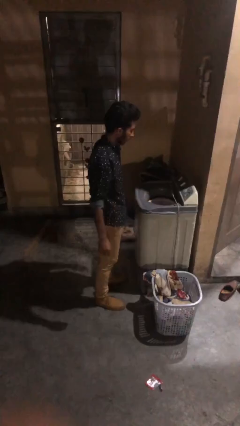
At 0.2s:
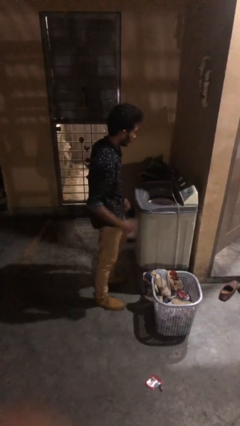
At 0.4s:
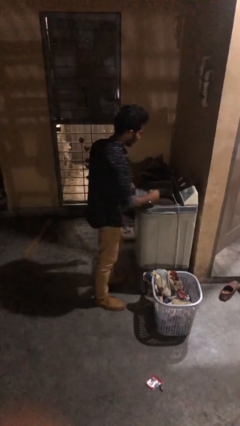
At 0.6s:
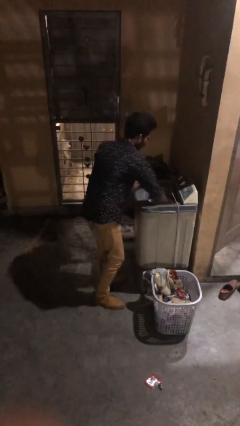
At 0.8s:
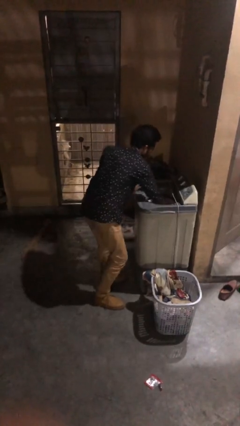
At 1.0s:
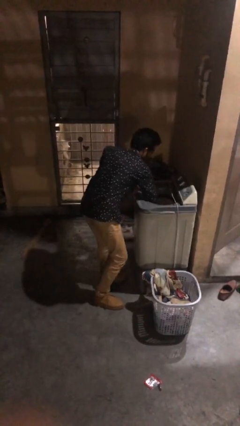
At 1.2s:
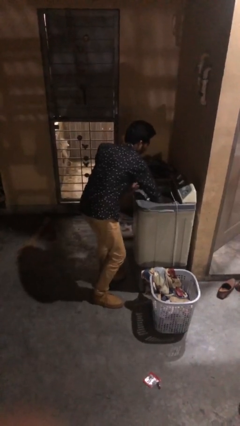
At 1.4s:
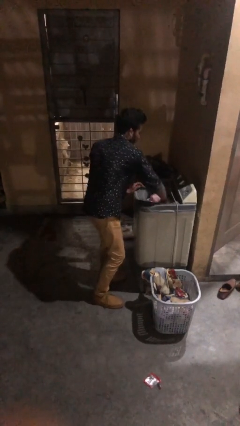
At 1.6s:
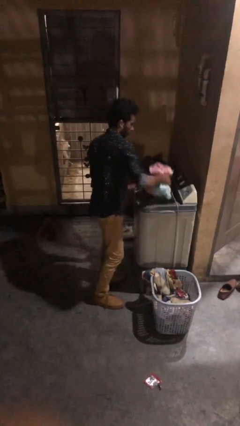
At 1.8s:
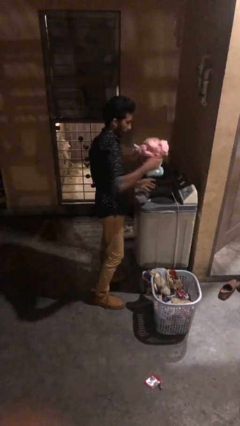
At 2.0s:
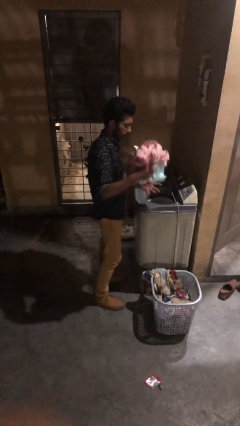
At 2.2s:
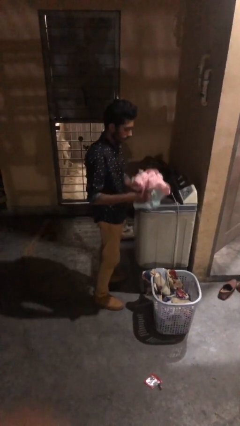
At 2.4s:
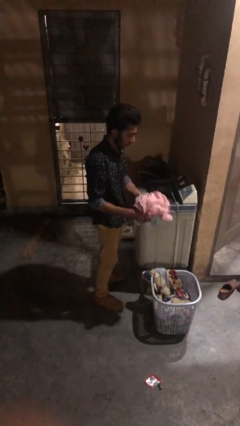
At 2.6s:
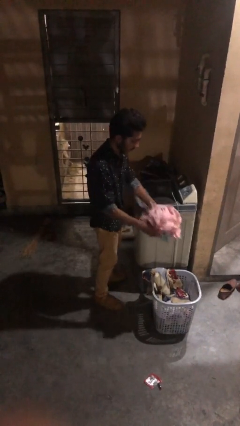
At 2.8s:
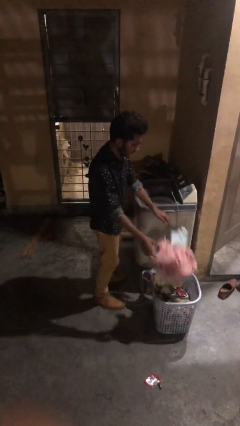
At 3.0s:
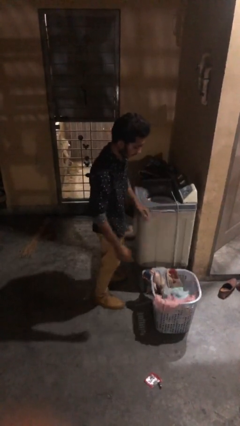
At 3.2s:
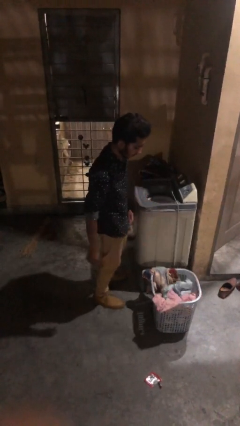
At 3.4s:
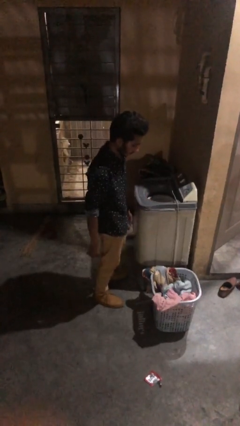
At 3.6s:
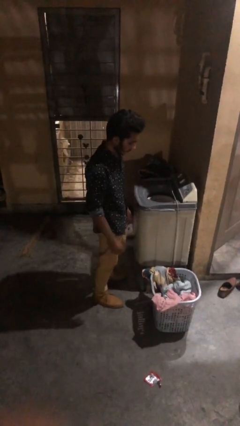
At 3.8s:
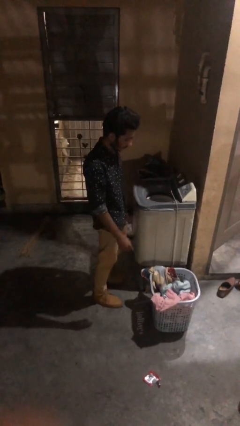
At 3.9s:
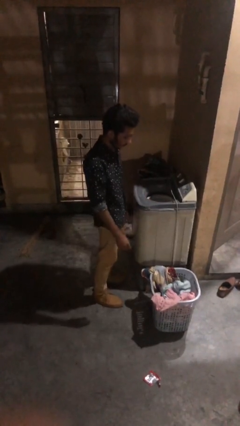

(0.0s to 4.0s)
person unloads clotheswasher

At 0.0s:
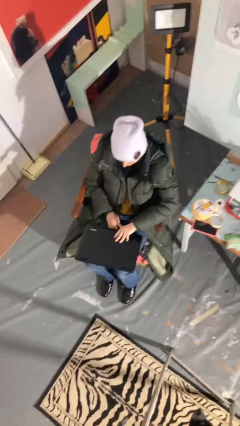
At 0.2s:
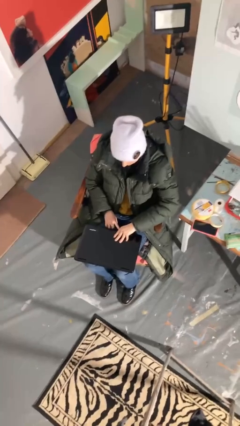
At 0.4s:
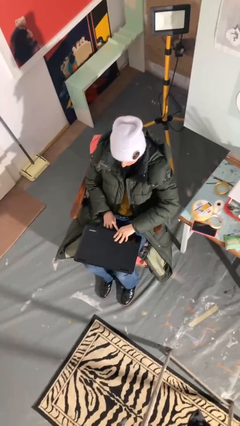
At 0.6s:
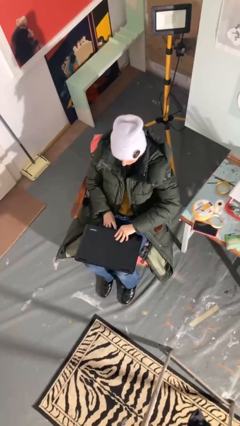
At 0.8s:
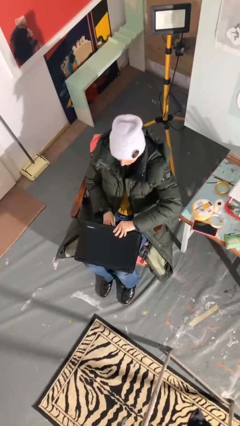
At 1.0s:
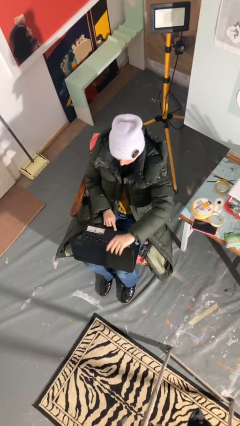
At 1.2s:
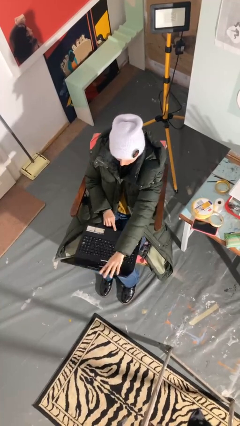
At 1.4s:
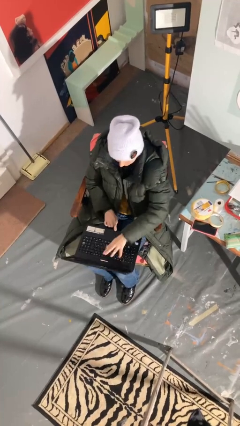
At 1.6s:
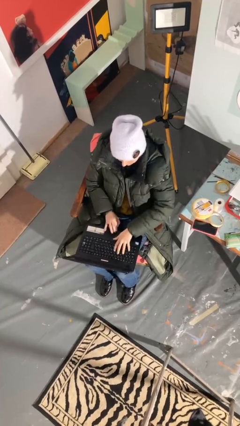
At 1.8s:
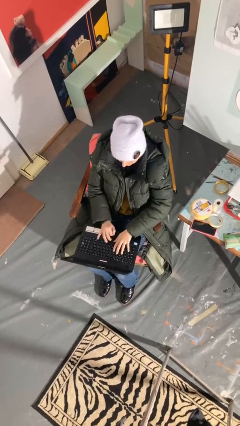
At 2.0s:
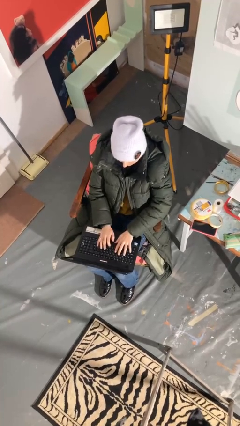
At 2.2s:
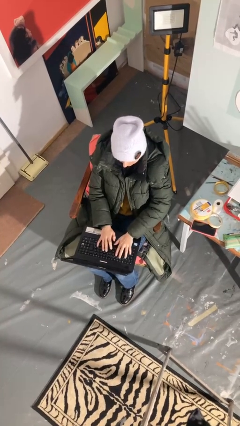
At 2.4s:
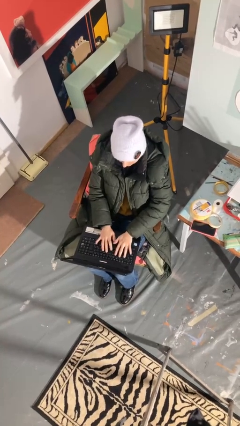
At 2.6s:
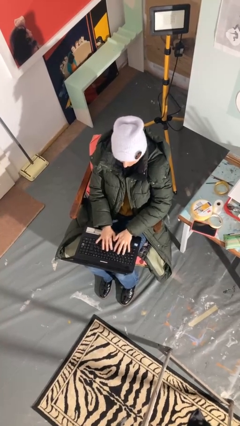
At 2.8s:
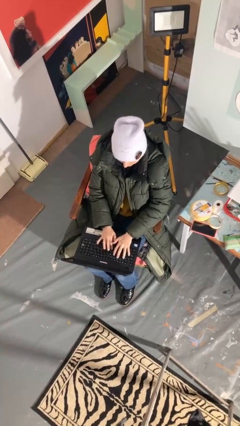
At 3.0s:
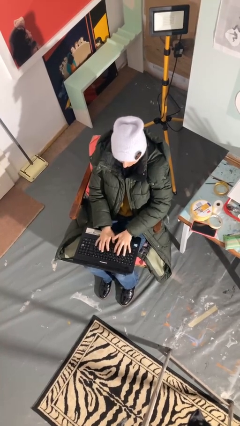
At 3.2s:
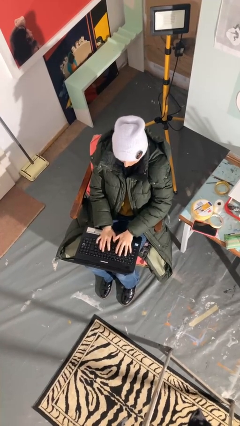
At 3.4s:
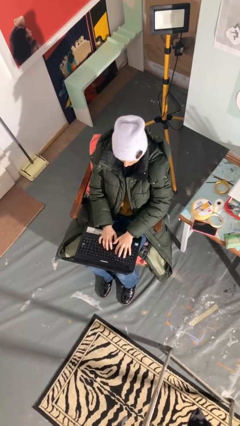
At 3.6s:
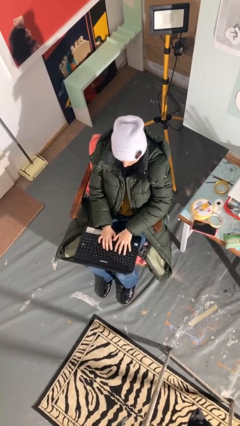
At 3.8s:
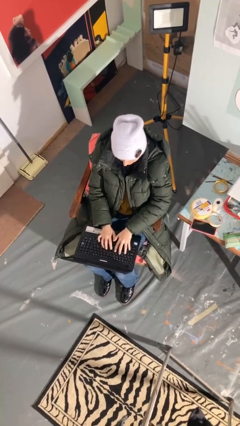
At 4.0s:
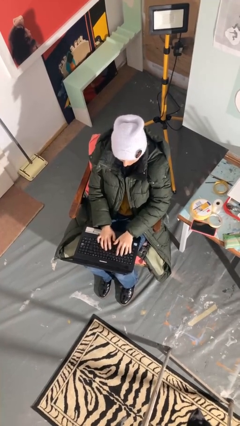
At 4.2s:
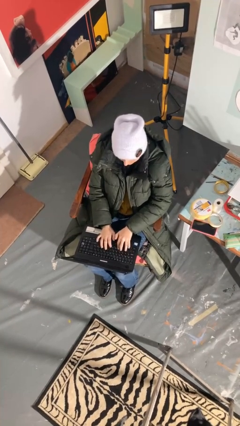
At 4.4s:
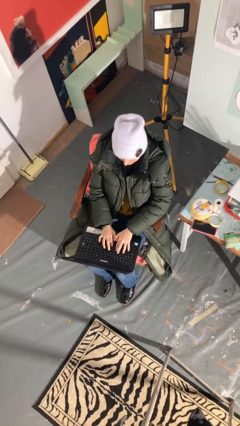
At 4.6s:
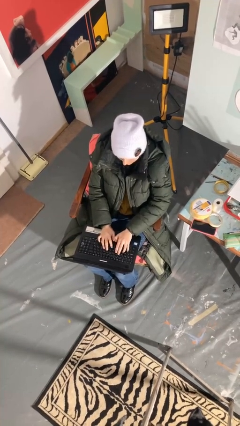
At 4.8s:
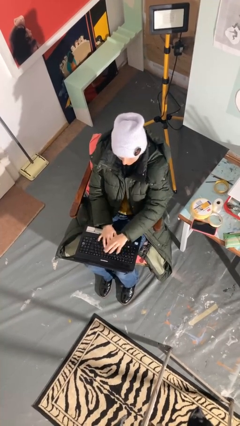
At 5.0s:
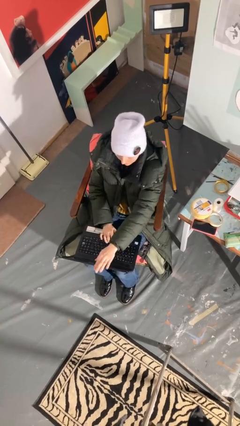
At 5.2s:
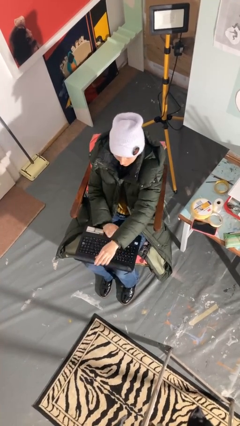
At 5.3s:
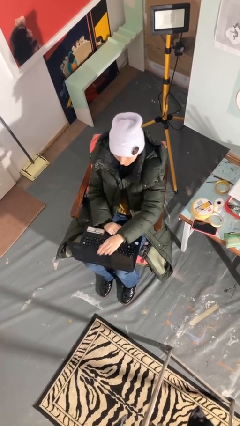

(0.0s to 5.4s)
person interacts with laptop

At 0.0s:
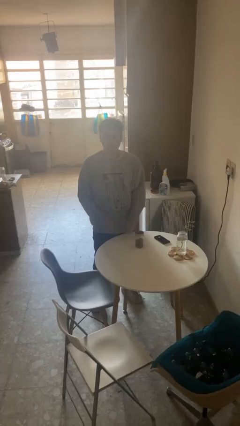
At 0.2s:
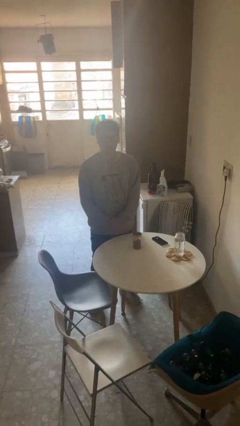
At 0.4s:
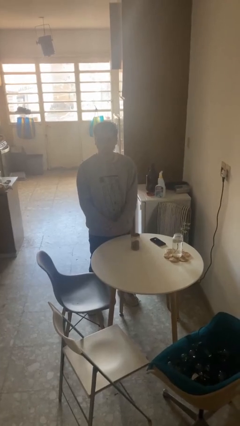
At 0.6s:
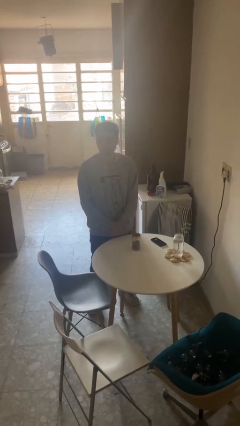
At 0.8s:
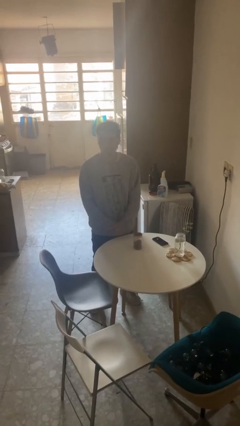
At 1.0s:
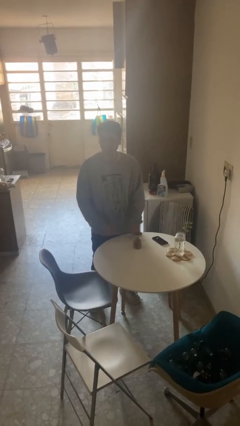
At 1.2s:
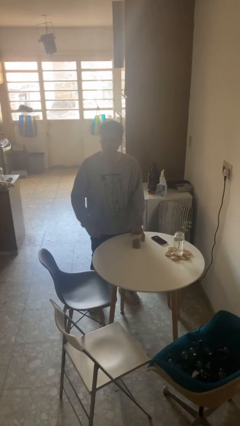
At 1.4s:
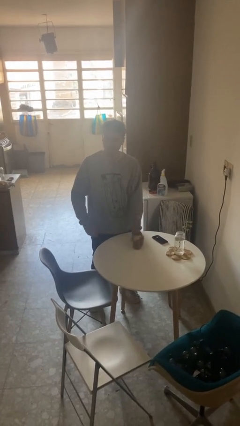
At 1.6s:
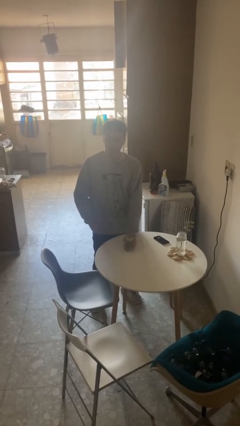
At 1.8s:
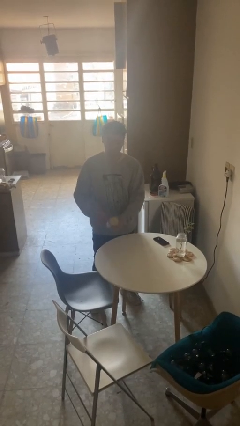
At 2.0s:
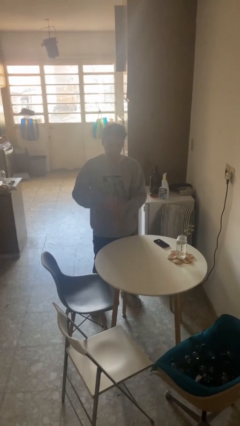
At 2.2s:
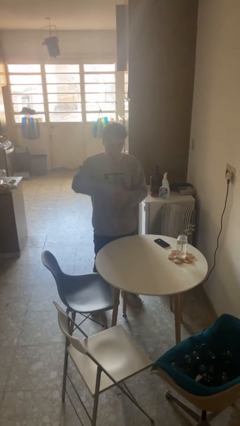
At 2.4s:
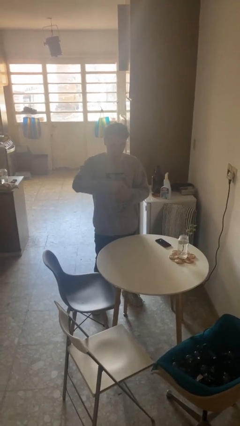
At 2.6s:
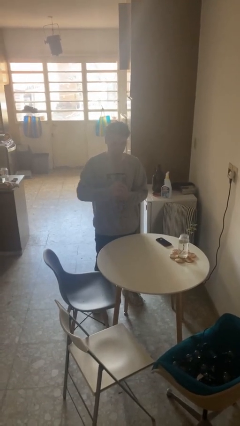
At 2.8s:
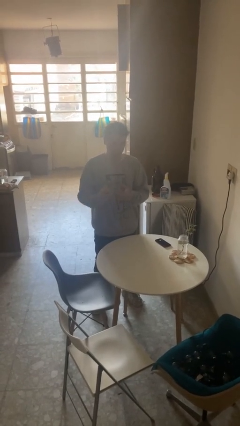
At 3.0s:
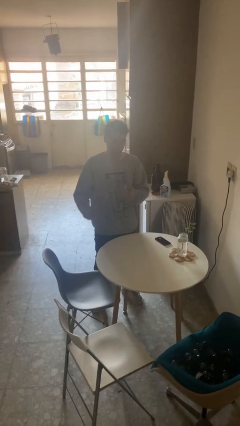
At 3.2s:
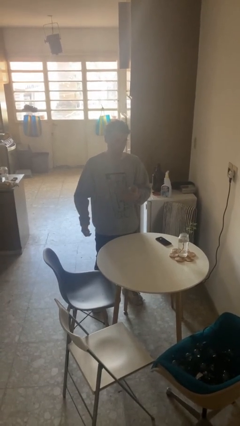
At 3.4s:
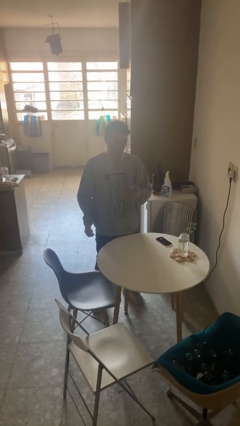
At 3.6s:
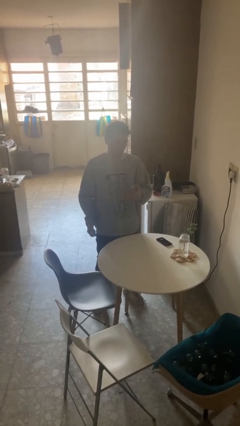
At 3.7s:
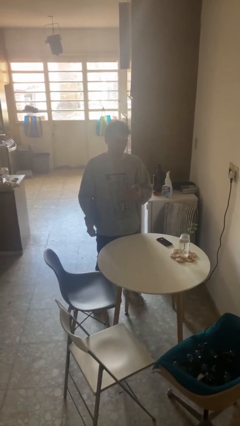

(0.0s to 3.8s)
person opens jar

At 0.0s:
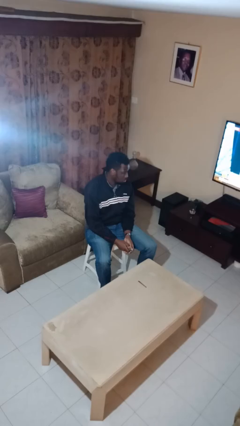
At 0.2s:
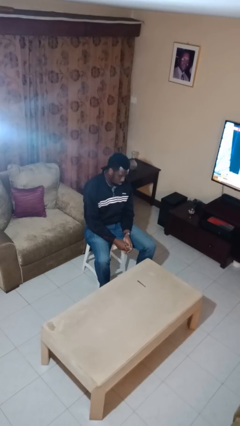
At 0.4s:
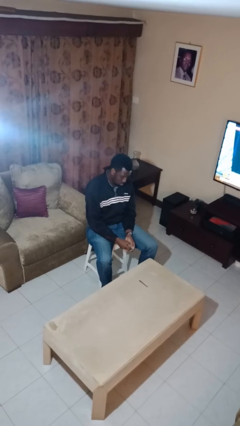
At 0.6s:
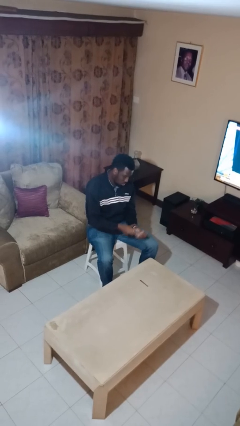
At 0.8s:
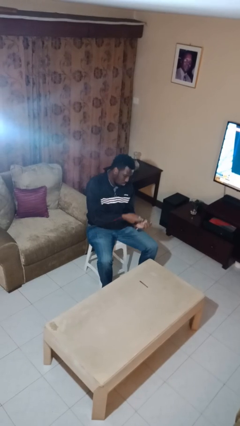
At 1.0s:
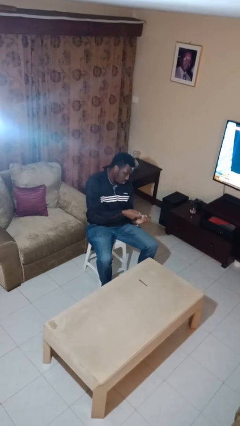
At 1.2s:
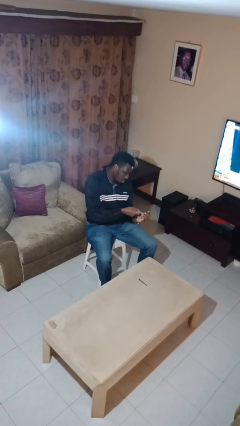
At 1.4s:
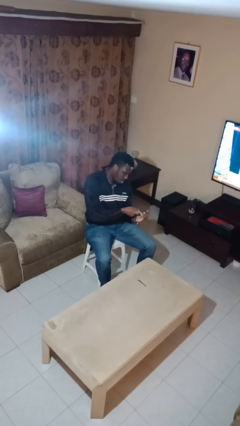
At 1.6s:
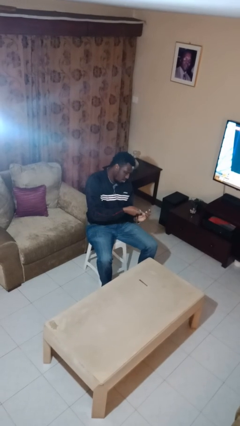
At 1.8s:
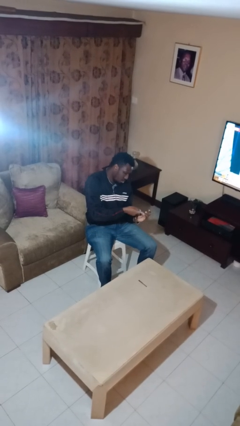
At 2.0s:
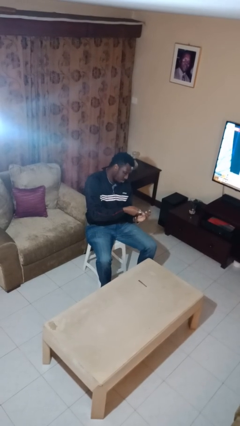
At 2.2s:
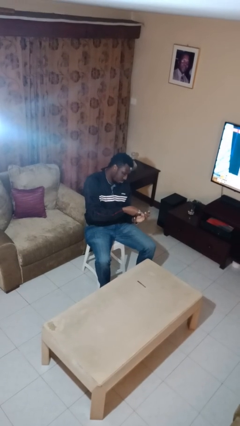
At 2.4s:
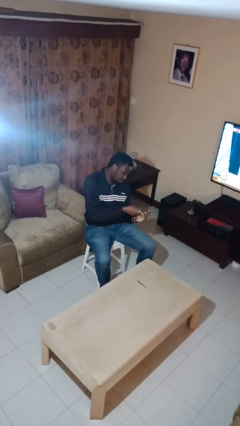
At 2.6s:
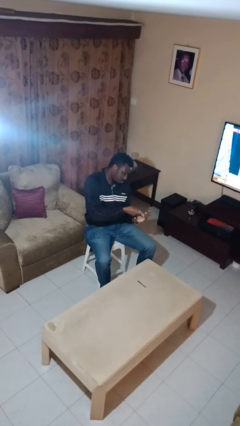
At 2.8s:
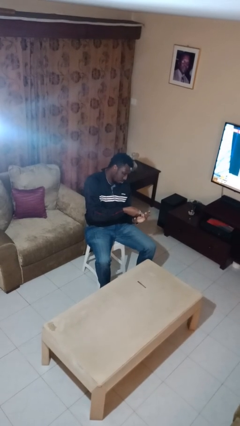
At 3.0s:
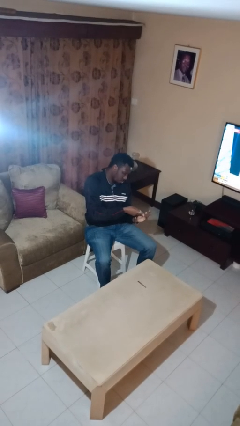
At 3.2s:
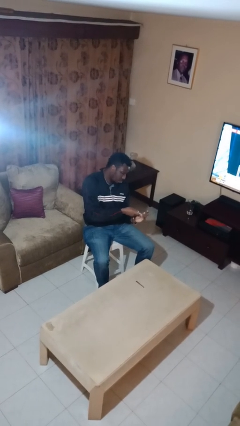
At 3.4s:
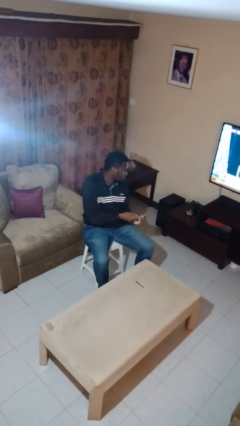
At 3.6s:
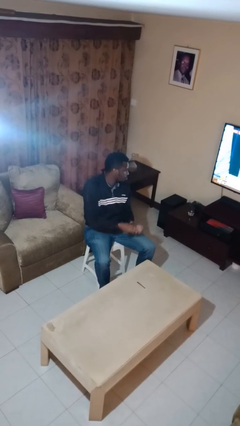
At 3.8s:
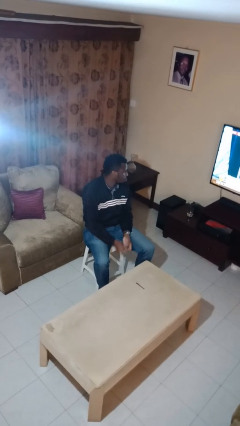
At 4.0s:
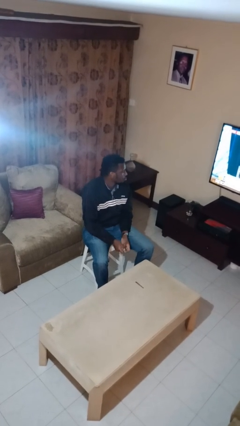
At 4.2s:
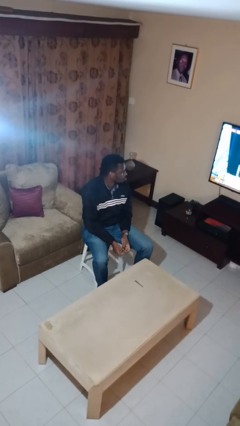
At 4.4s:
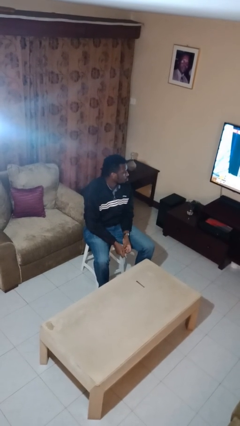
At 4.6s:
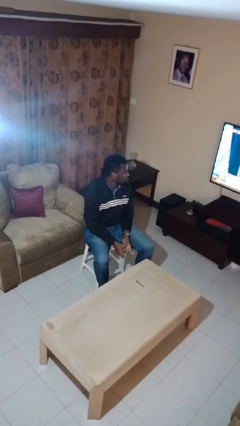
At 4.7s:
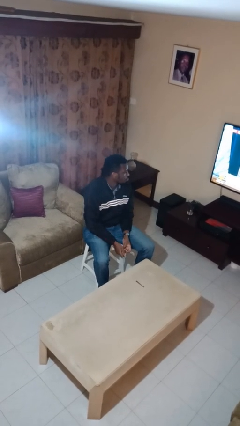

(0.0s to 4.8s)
person clips fingernails
